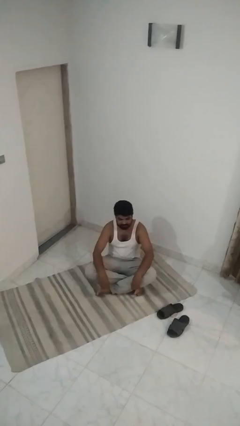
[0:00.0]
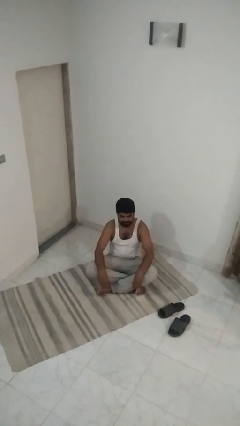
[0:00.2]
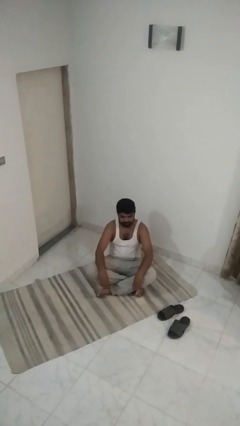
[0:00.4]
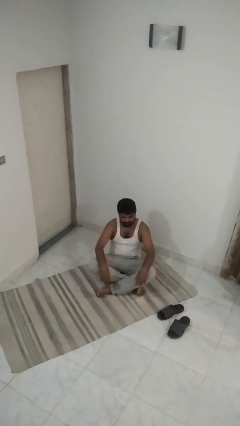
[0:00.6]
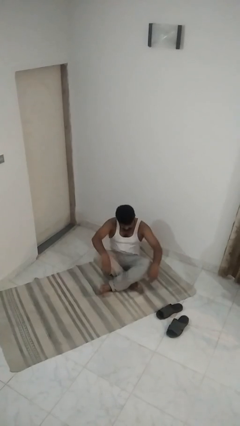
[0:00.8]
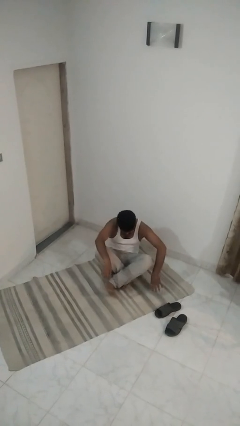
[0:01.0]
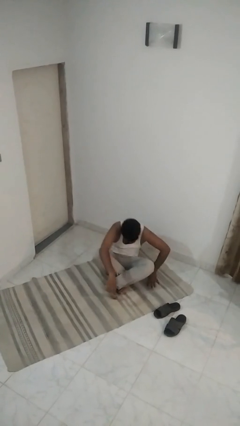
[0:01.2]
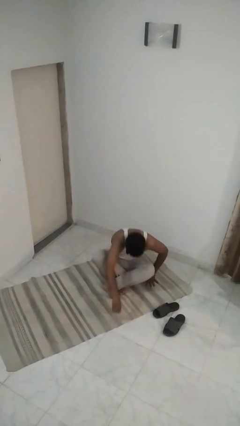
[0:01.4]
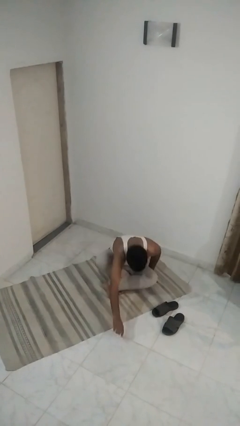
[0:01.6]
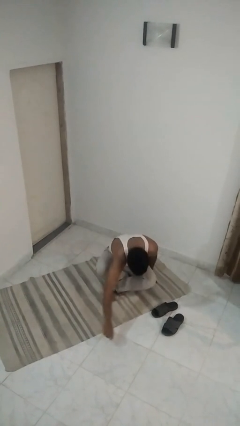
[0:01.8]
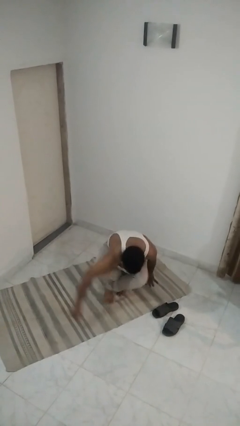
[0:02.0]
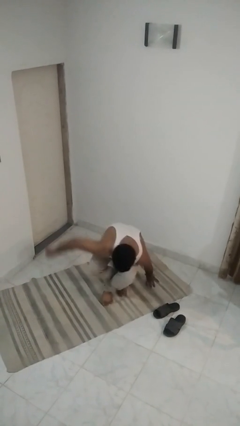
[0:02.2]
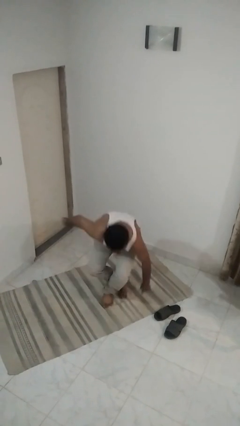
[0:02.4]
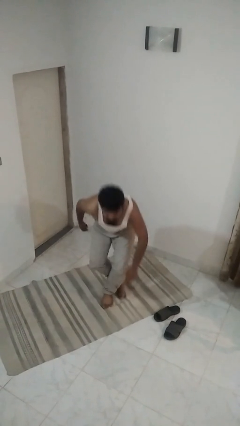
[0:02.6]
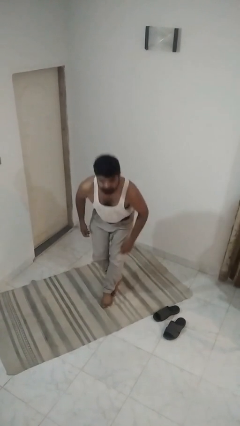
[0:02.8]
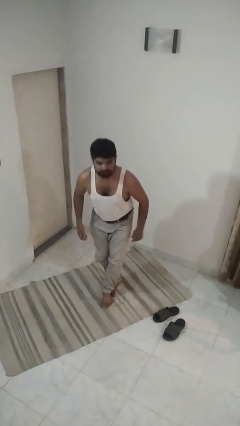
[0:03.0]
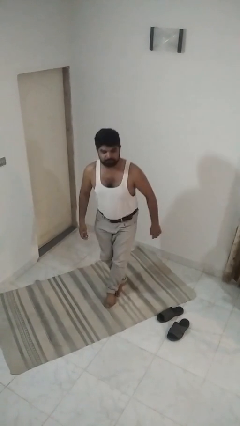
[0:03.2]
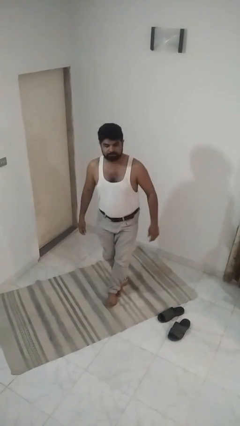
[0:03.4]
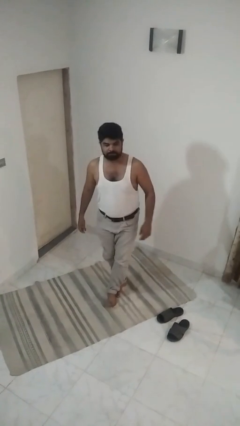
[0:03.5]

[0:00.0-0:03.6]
person stands up from floor

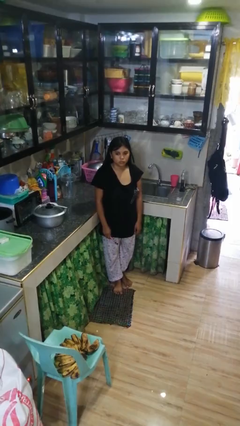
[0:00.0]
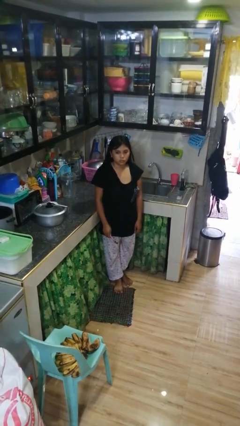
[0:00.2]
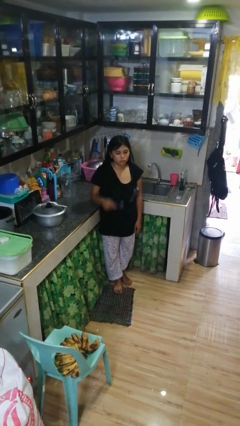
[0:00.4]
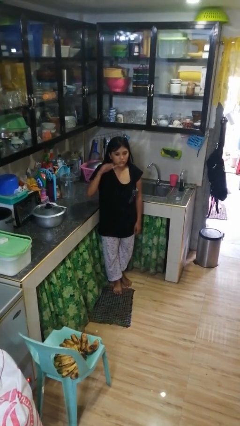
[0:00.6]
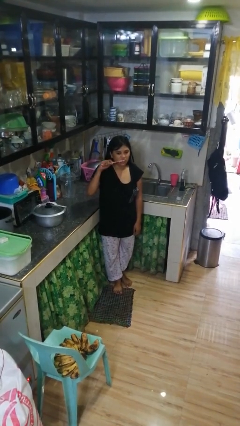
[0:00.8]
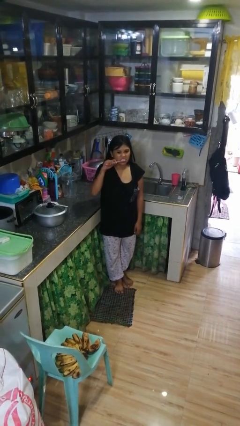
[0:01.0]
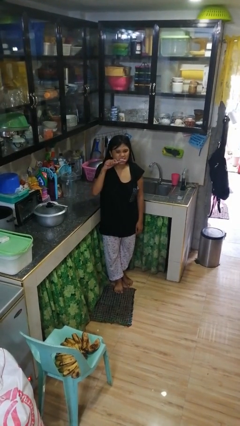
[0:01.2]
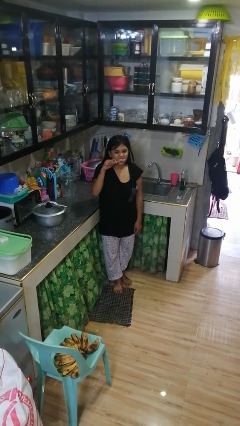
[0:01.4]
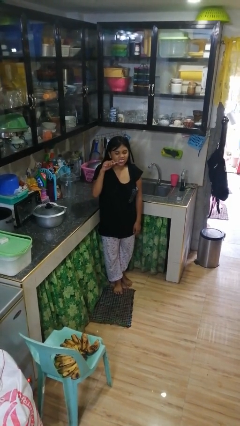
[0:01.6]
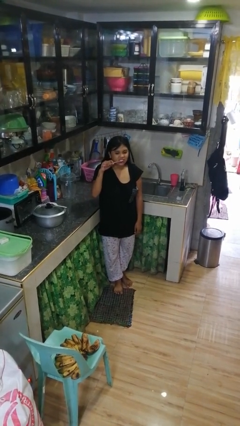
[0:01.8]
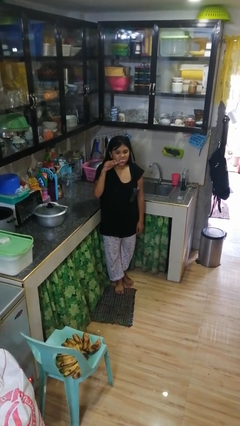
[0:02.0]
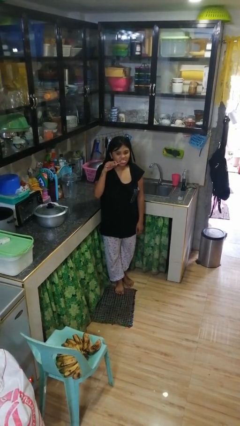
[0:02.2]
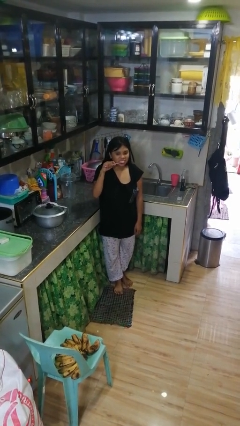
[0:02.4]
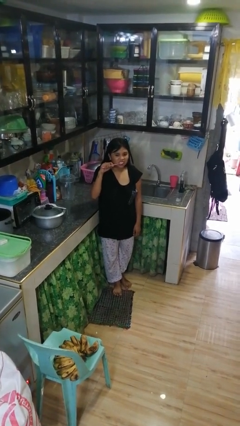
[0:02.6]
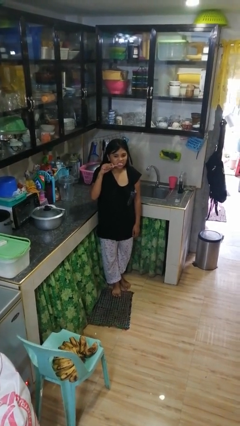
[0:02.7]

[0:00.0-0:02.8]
person brushes teeth

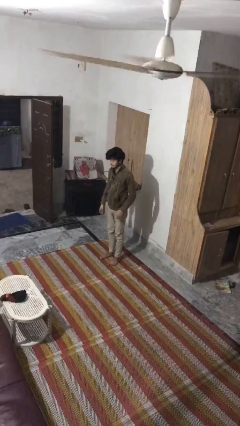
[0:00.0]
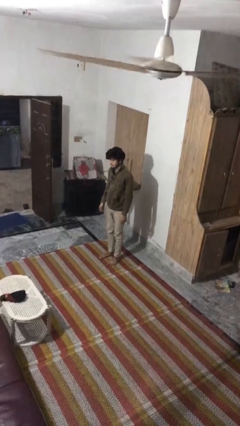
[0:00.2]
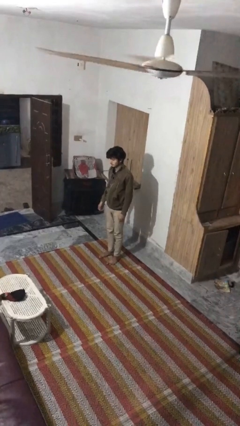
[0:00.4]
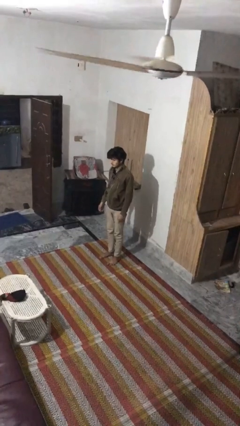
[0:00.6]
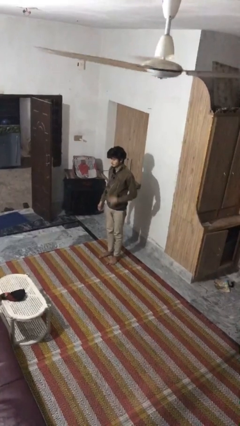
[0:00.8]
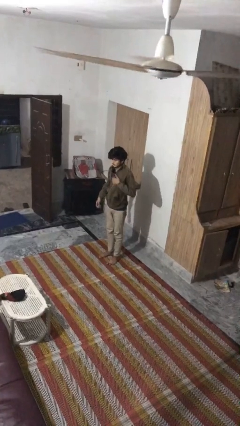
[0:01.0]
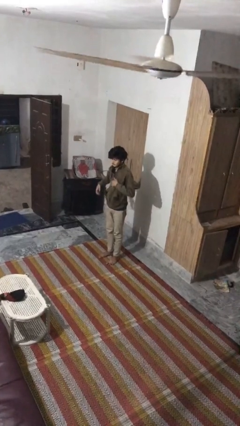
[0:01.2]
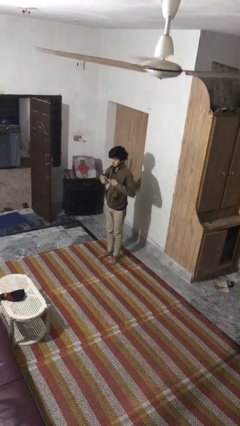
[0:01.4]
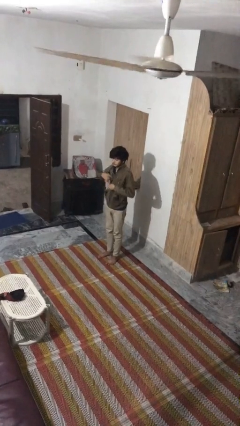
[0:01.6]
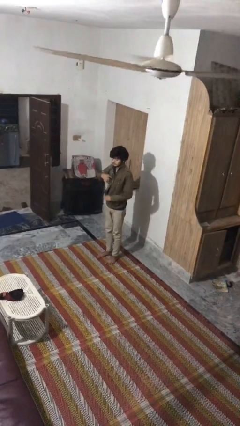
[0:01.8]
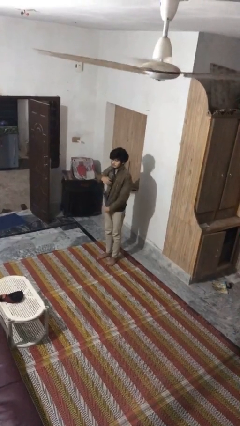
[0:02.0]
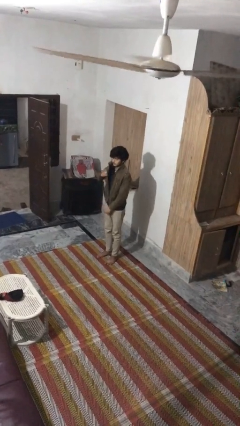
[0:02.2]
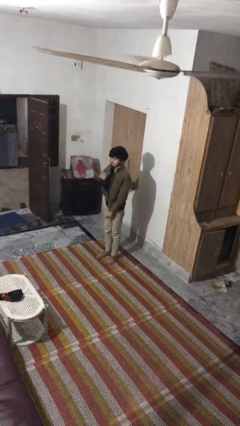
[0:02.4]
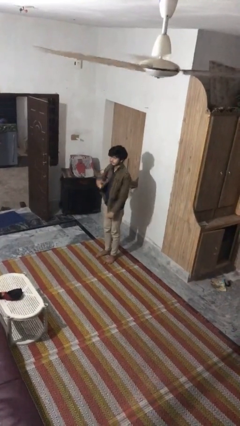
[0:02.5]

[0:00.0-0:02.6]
person unzips jacket

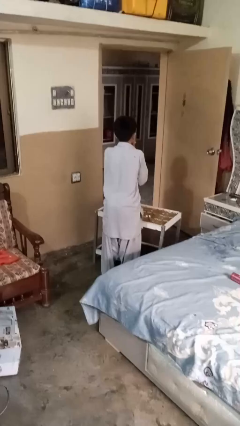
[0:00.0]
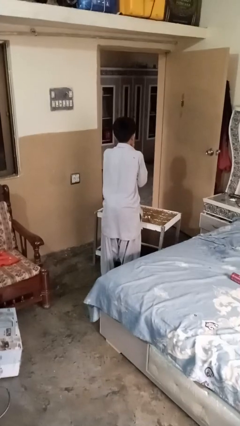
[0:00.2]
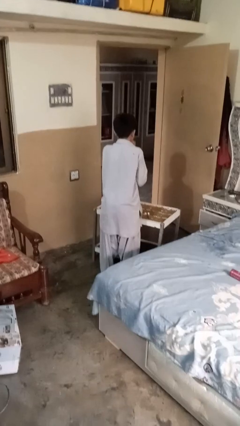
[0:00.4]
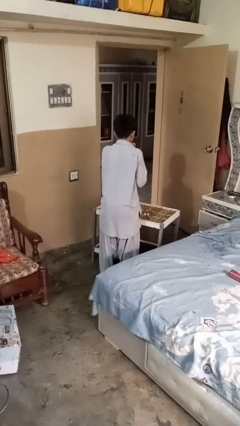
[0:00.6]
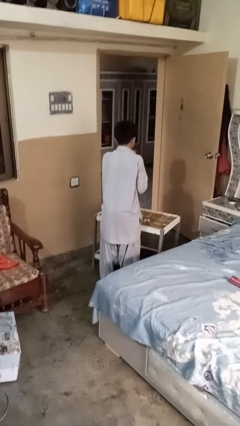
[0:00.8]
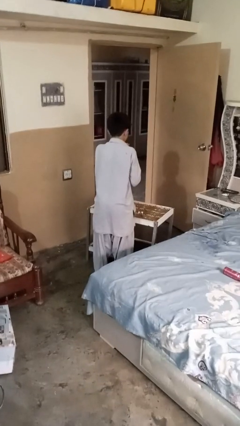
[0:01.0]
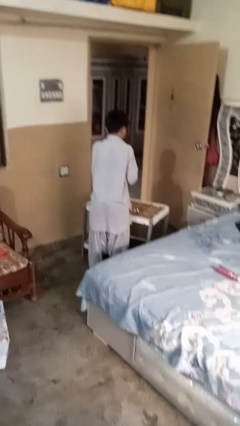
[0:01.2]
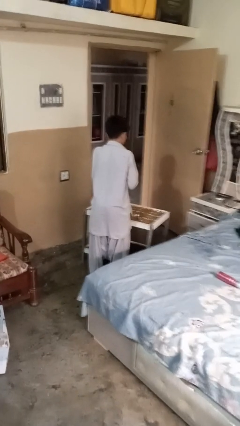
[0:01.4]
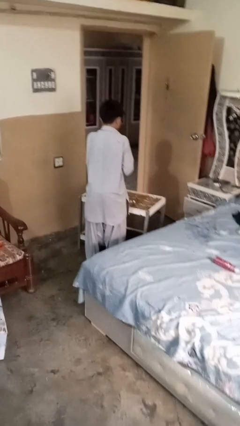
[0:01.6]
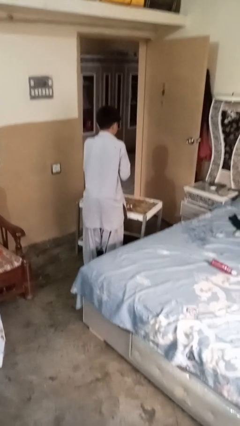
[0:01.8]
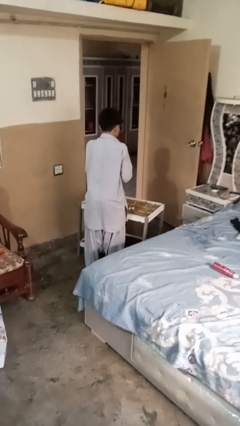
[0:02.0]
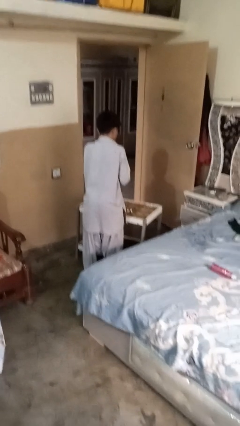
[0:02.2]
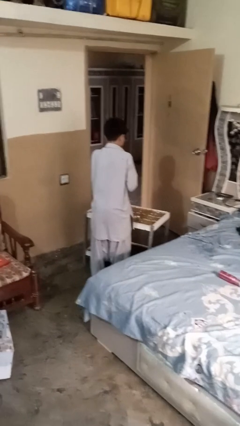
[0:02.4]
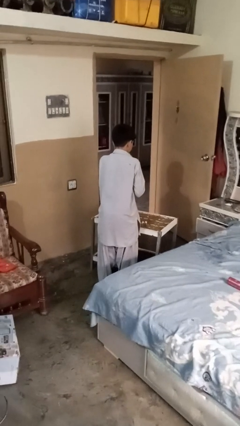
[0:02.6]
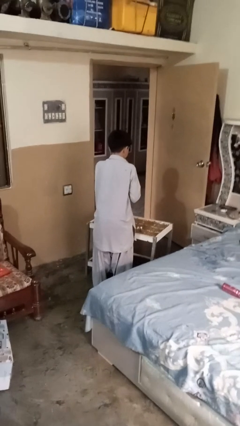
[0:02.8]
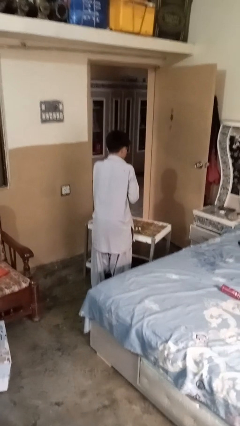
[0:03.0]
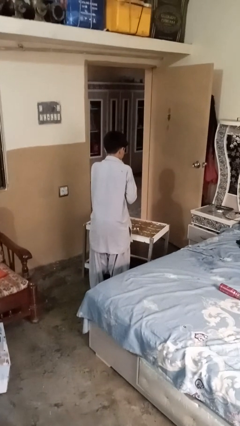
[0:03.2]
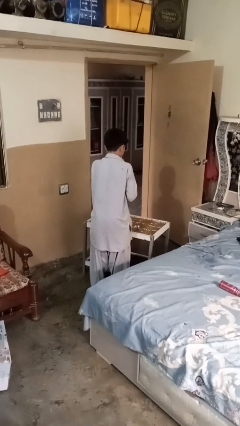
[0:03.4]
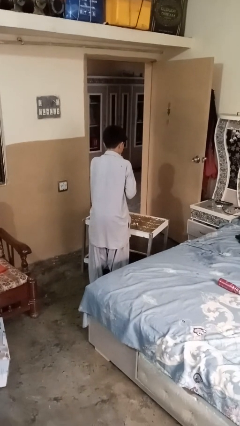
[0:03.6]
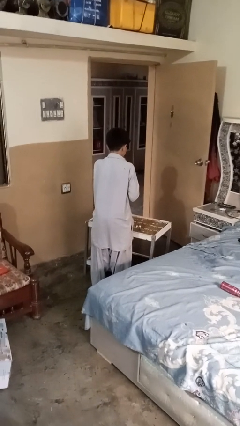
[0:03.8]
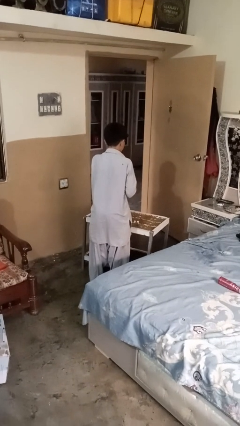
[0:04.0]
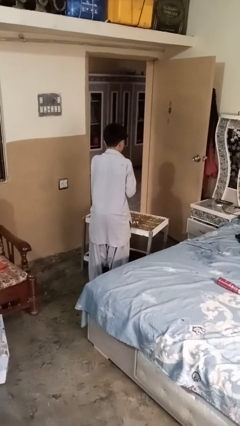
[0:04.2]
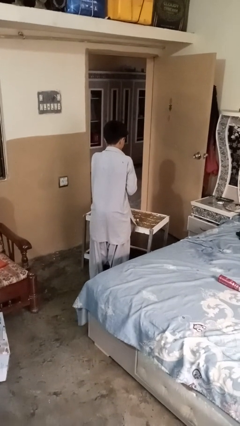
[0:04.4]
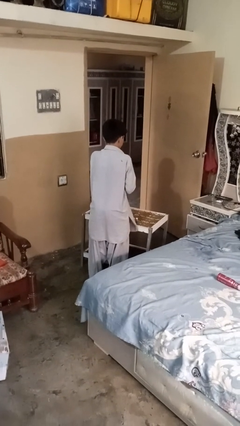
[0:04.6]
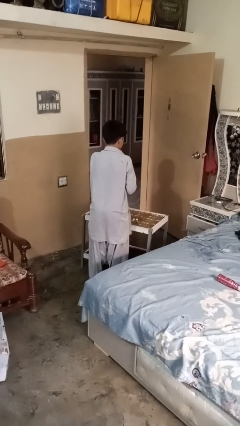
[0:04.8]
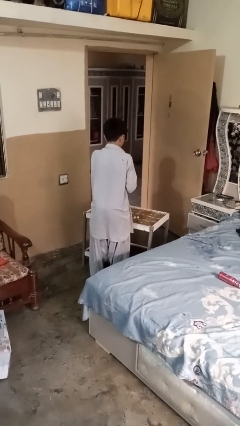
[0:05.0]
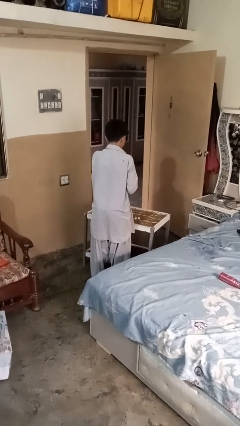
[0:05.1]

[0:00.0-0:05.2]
person applies shaving cream

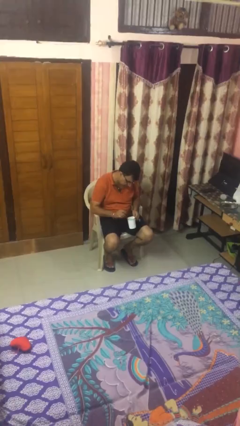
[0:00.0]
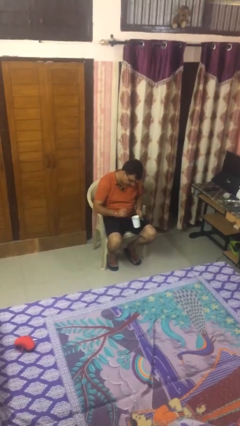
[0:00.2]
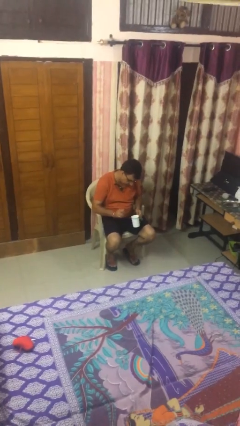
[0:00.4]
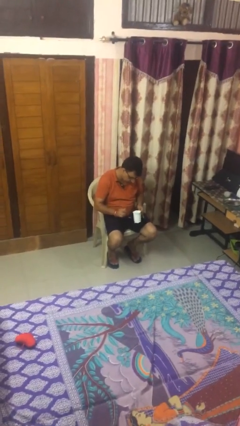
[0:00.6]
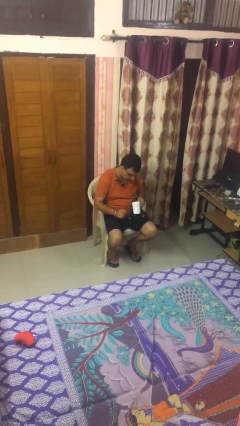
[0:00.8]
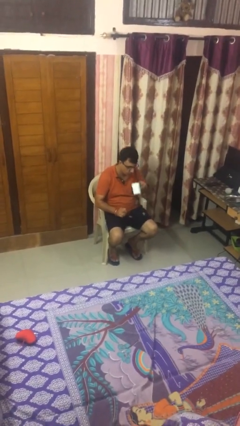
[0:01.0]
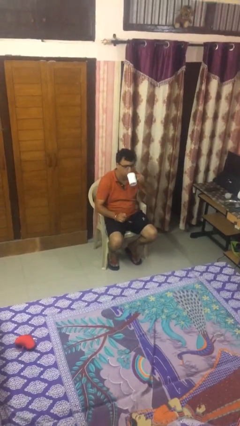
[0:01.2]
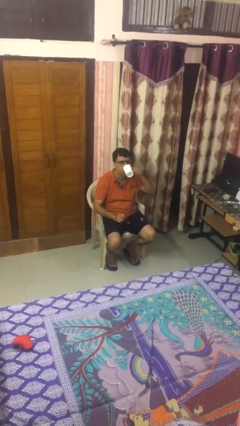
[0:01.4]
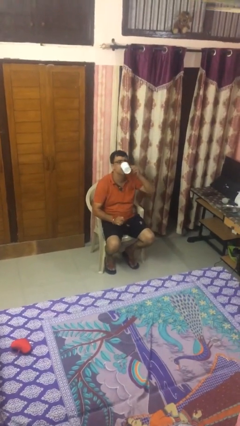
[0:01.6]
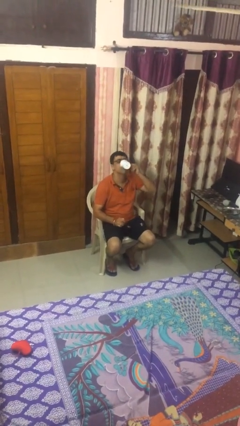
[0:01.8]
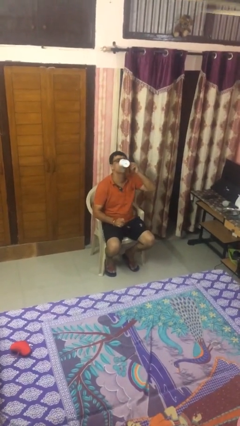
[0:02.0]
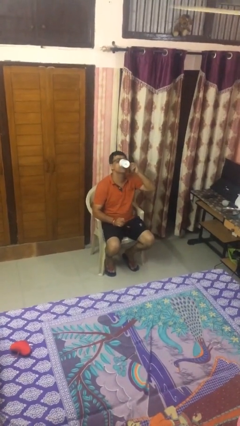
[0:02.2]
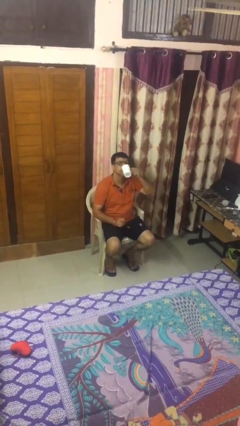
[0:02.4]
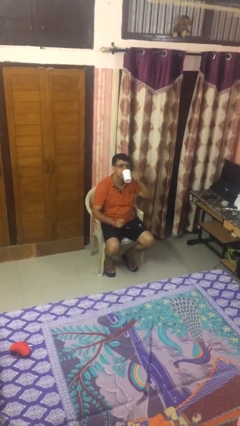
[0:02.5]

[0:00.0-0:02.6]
person drinks from mug

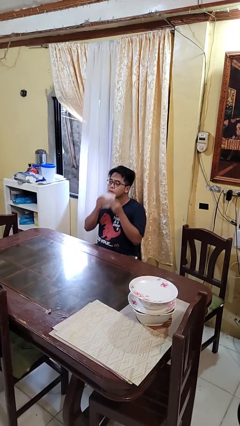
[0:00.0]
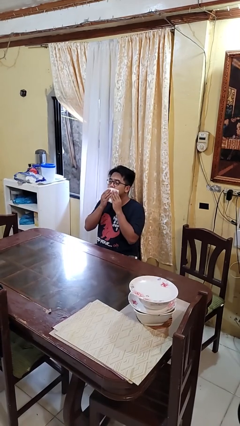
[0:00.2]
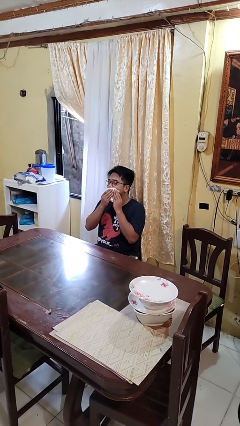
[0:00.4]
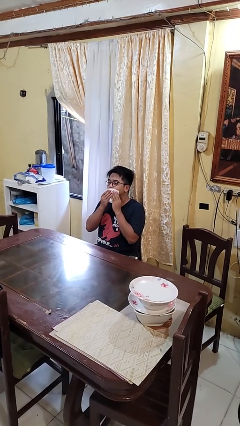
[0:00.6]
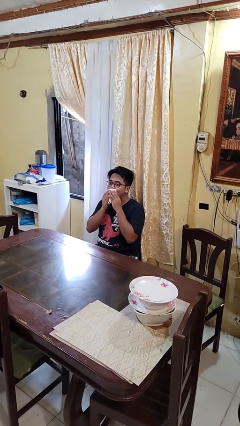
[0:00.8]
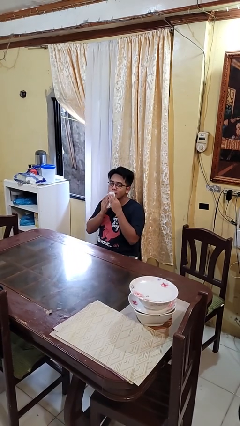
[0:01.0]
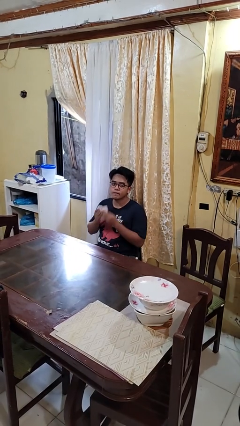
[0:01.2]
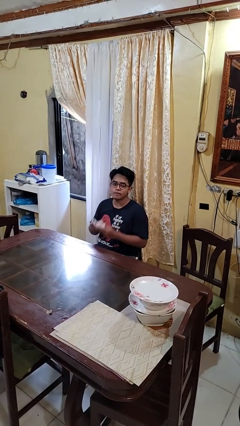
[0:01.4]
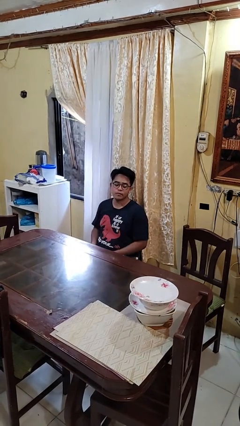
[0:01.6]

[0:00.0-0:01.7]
person wipes mouth with napkin
